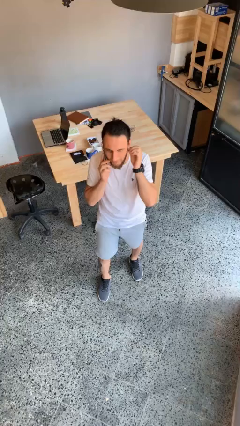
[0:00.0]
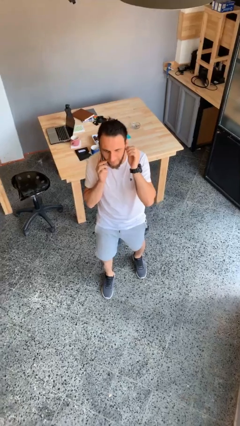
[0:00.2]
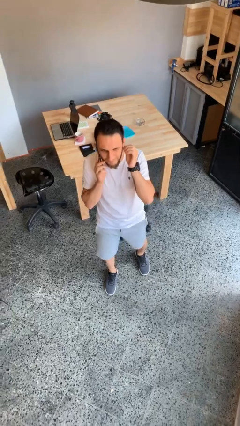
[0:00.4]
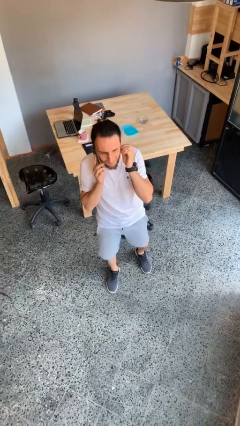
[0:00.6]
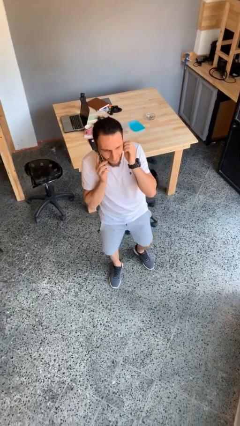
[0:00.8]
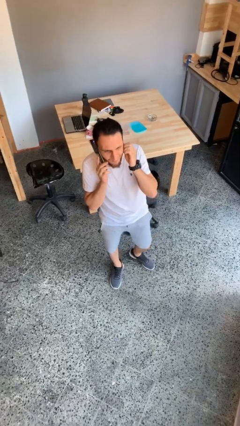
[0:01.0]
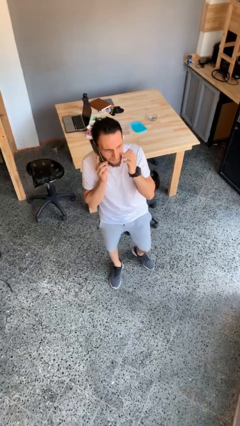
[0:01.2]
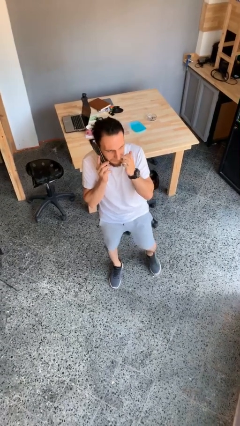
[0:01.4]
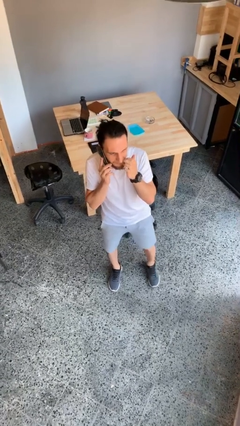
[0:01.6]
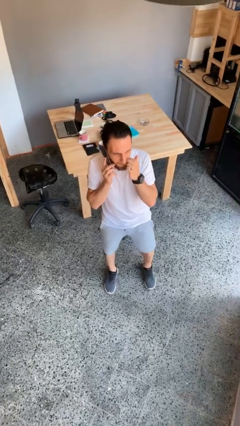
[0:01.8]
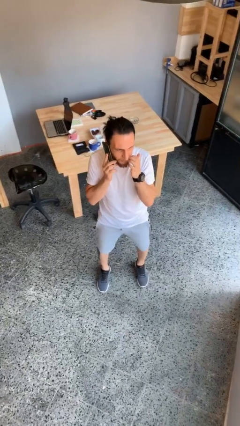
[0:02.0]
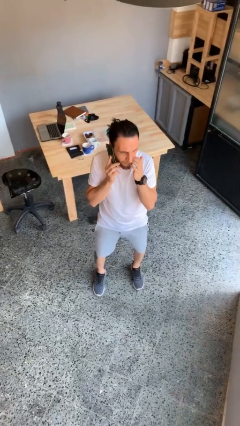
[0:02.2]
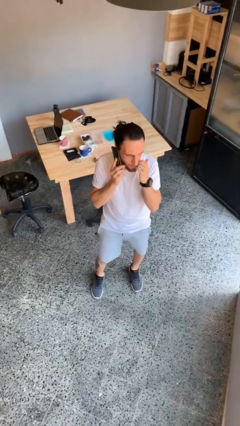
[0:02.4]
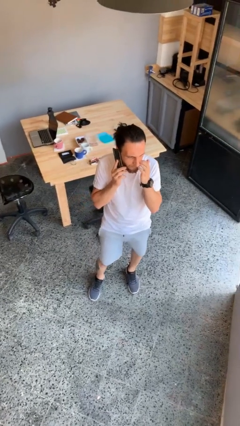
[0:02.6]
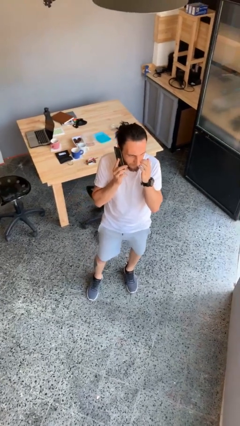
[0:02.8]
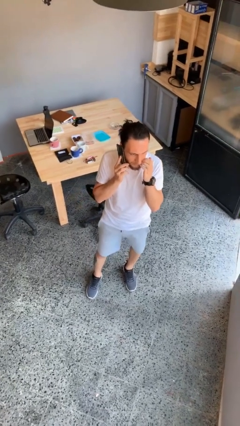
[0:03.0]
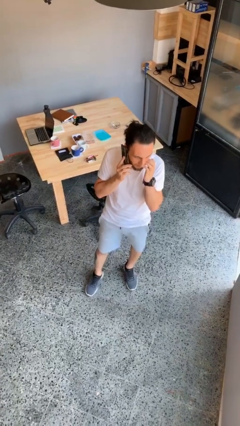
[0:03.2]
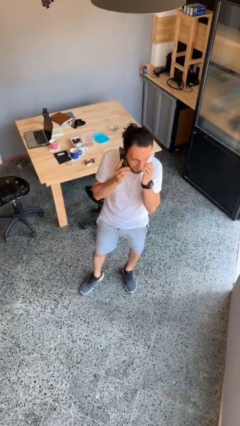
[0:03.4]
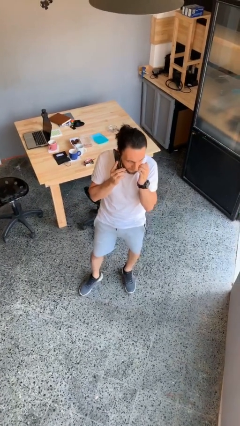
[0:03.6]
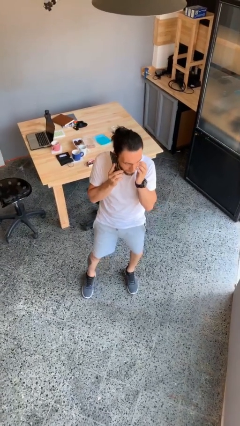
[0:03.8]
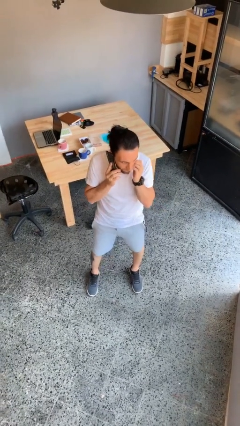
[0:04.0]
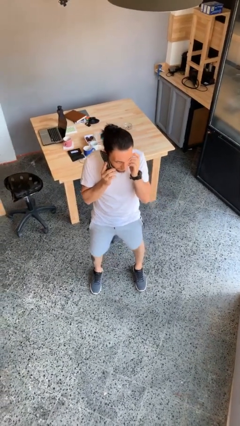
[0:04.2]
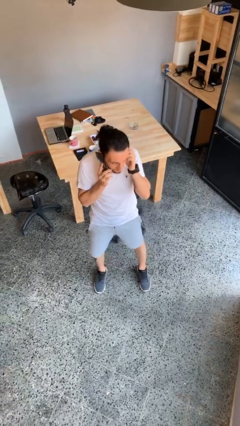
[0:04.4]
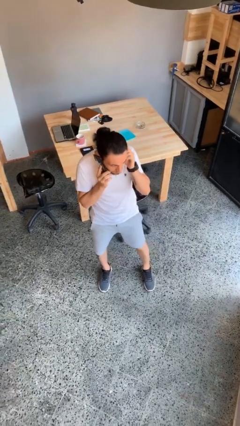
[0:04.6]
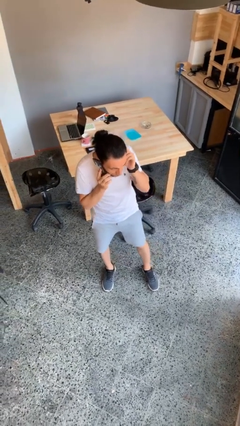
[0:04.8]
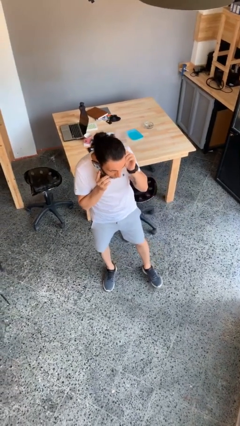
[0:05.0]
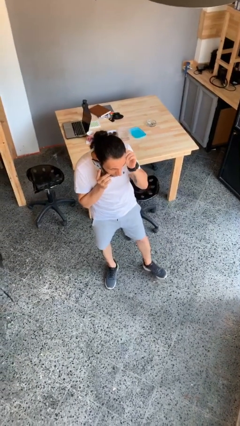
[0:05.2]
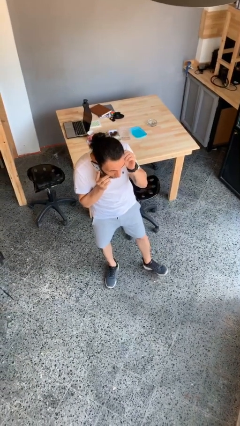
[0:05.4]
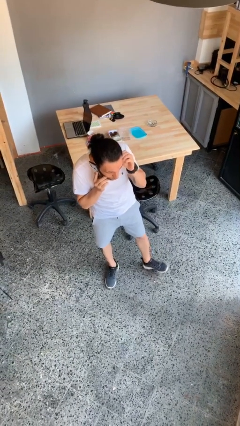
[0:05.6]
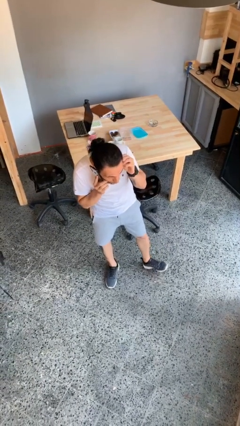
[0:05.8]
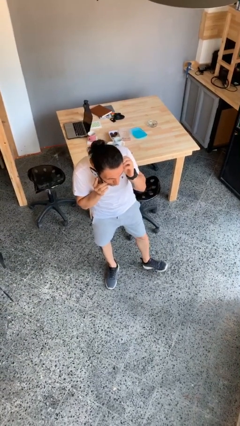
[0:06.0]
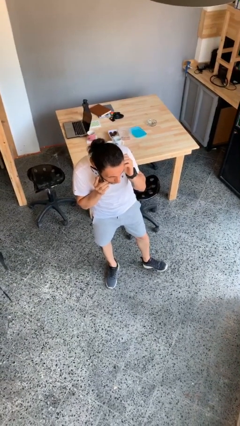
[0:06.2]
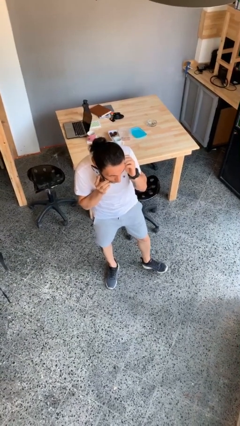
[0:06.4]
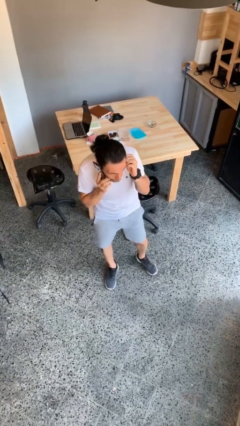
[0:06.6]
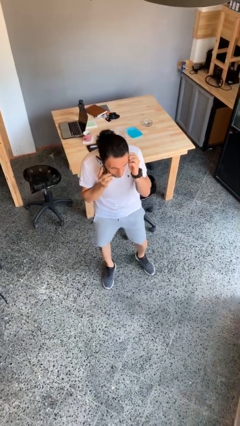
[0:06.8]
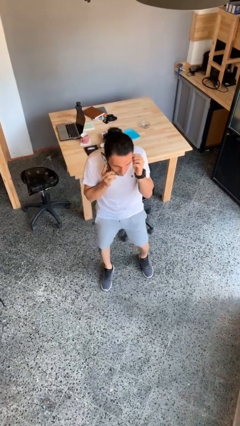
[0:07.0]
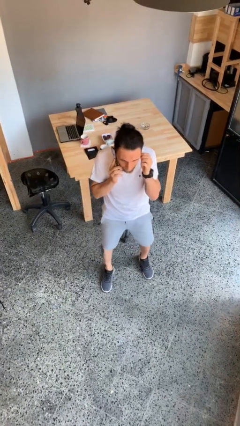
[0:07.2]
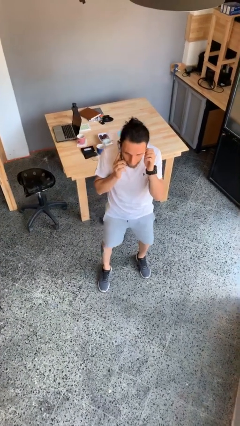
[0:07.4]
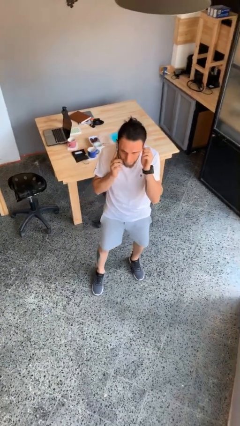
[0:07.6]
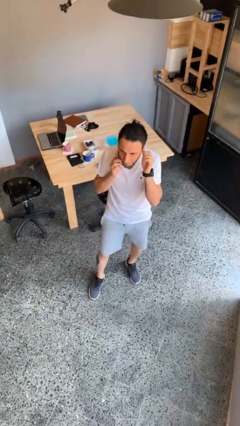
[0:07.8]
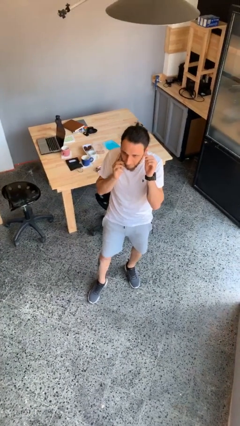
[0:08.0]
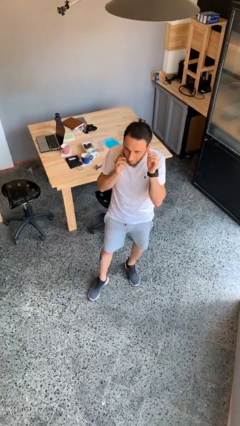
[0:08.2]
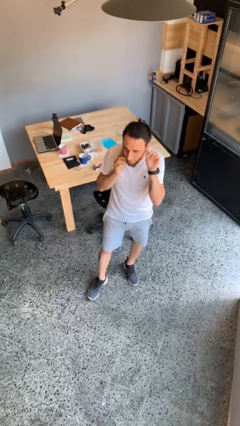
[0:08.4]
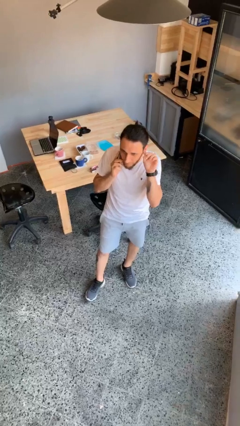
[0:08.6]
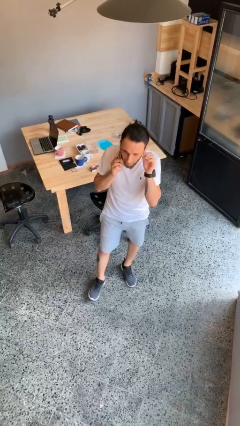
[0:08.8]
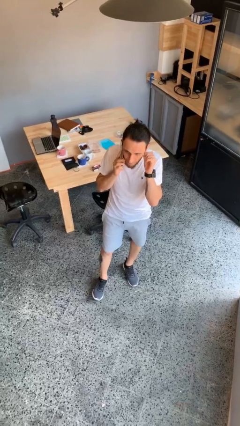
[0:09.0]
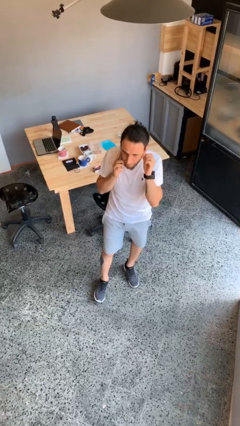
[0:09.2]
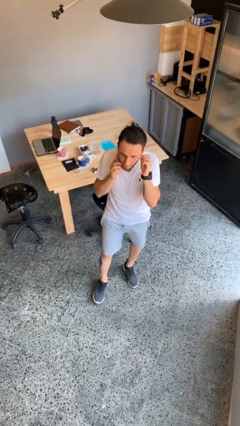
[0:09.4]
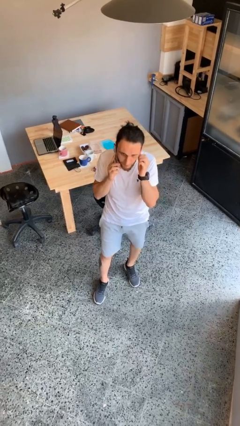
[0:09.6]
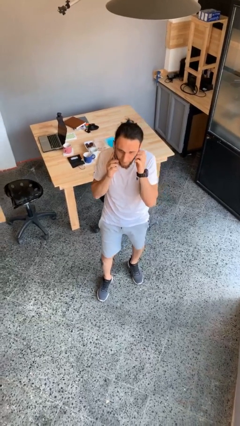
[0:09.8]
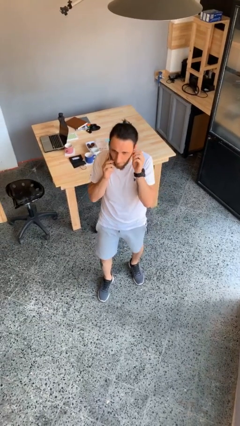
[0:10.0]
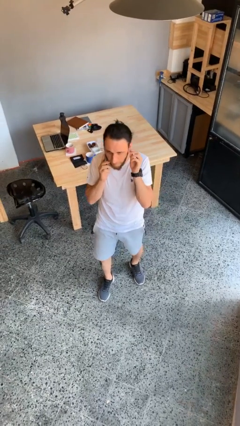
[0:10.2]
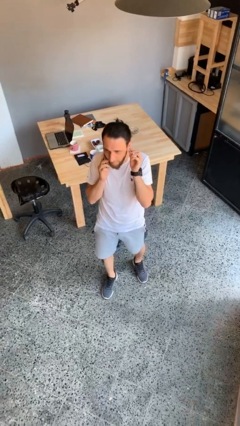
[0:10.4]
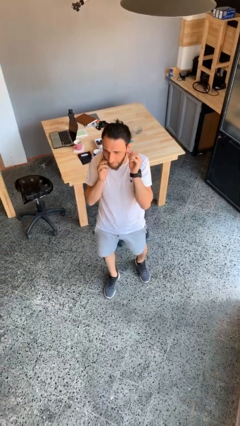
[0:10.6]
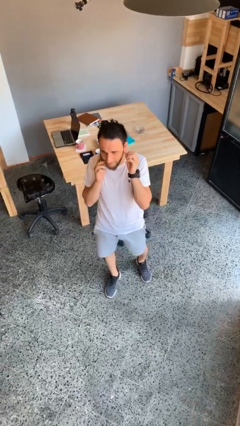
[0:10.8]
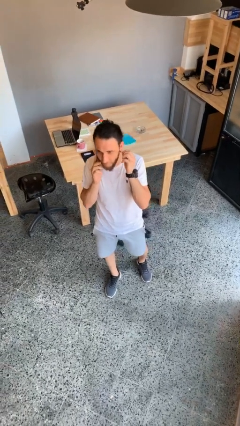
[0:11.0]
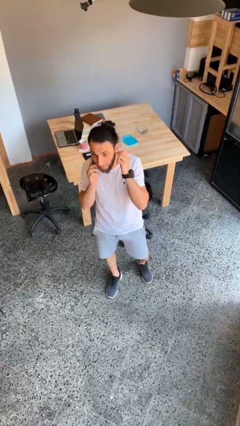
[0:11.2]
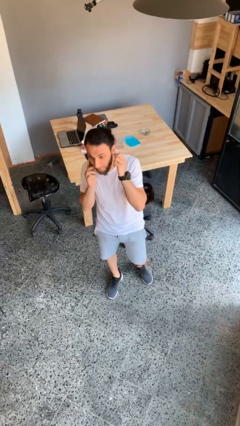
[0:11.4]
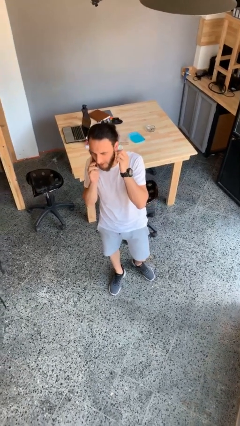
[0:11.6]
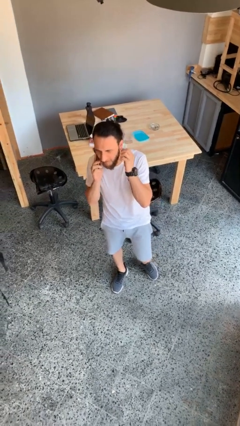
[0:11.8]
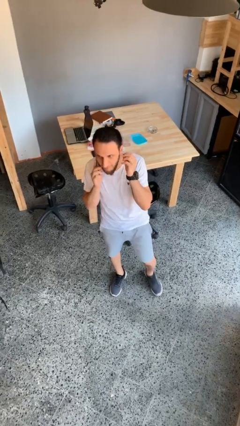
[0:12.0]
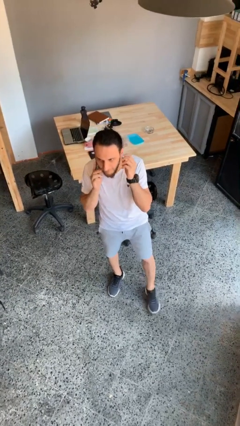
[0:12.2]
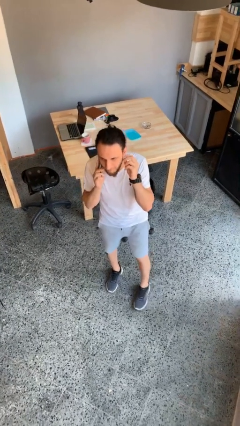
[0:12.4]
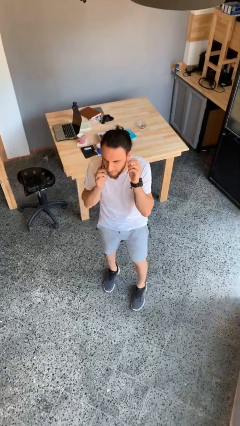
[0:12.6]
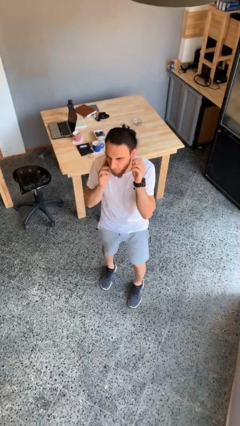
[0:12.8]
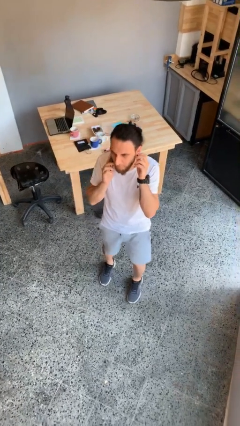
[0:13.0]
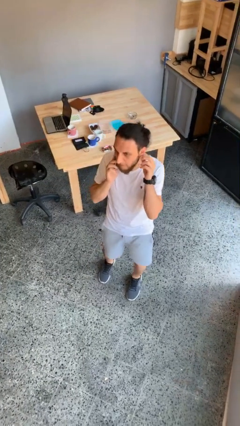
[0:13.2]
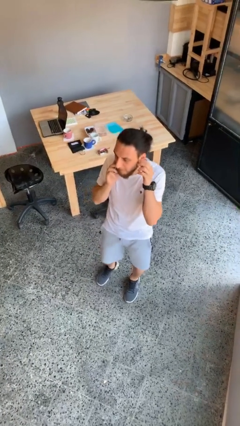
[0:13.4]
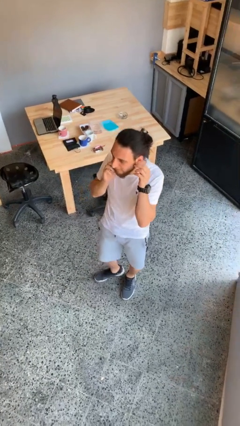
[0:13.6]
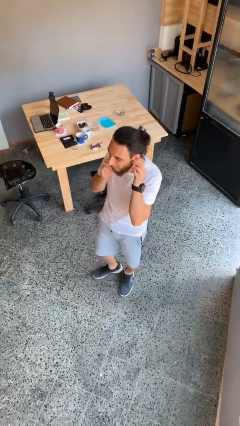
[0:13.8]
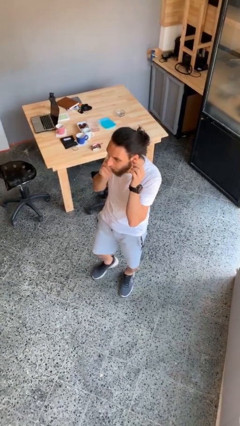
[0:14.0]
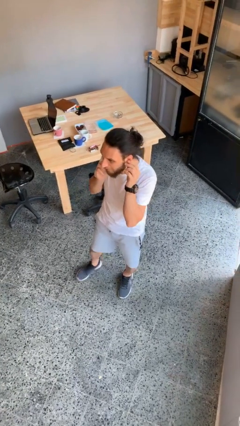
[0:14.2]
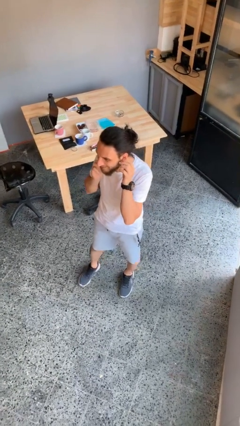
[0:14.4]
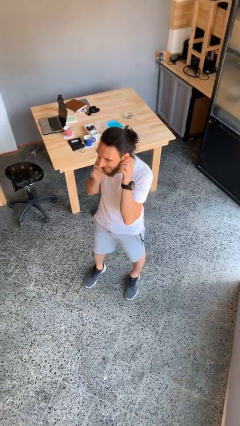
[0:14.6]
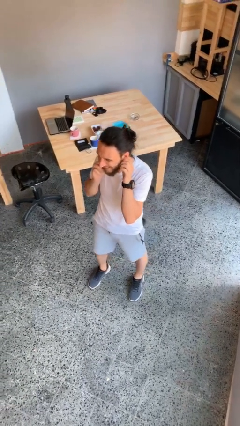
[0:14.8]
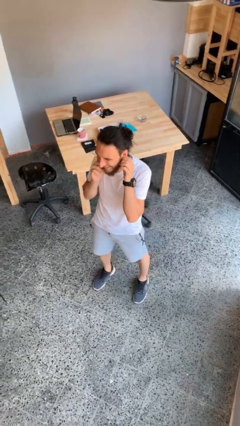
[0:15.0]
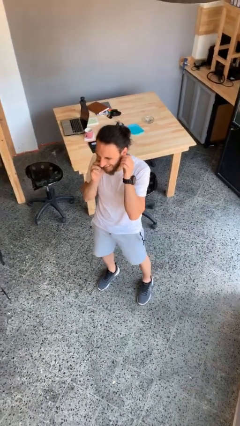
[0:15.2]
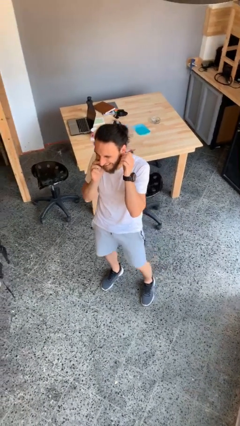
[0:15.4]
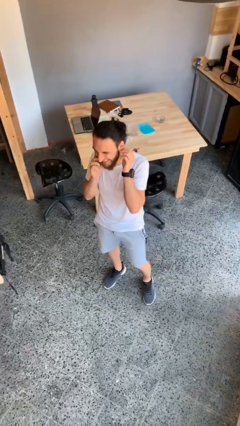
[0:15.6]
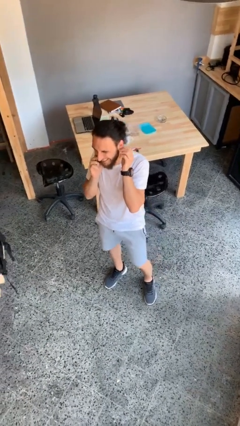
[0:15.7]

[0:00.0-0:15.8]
person talks on phone

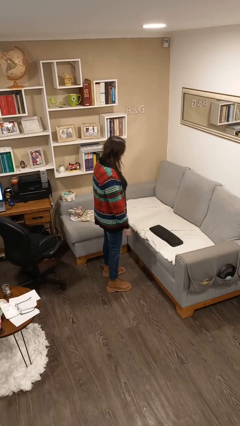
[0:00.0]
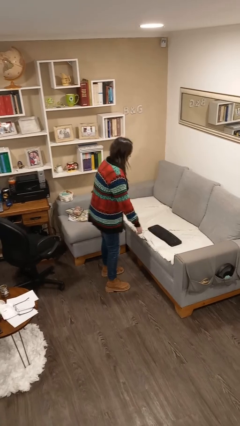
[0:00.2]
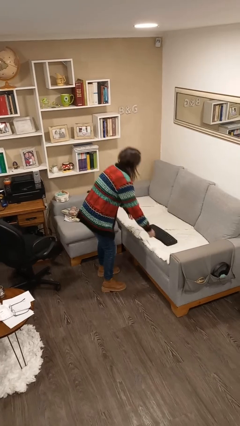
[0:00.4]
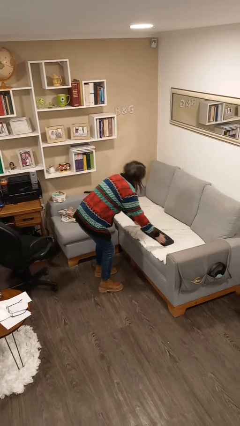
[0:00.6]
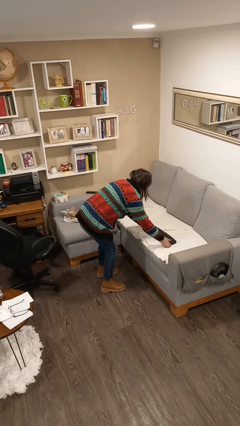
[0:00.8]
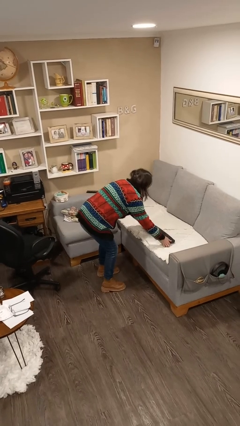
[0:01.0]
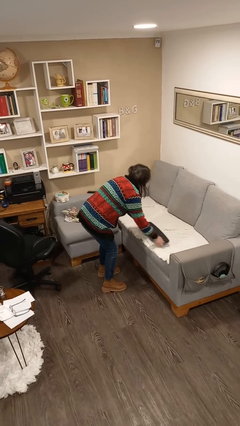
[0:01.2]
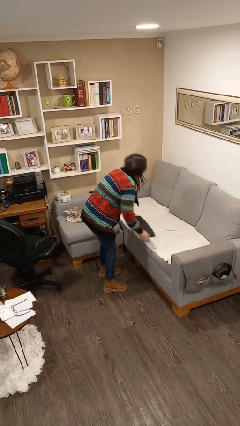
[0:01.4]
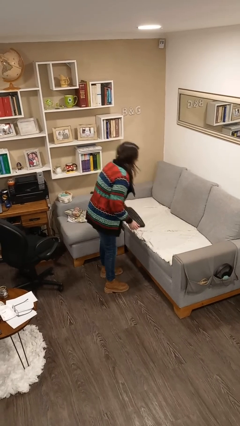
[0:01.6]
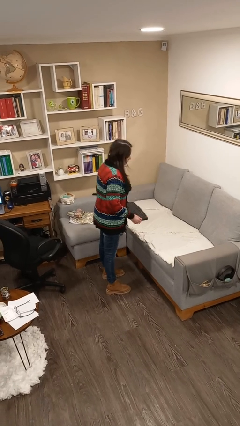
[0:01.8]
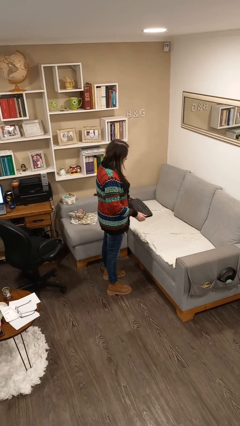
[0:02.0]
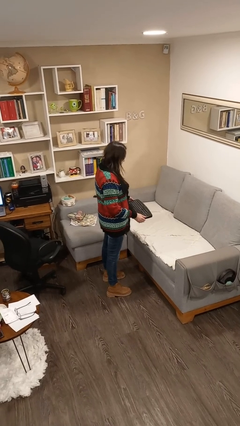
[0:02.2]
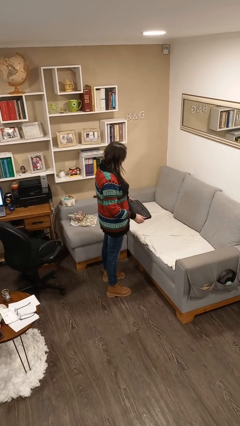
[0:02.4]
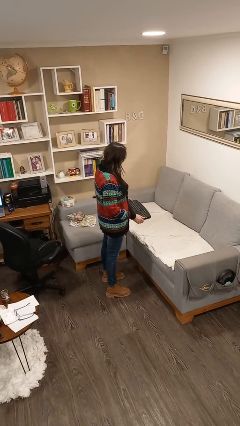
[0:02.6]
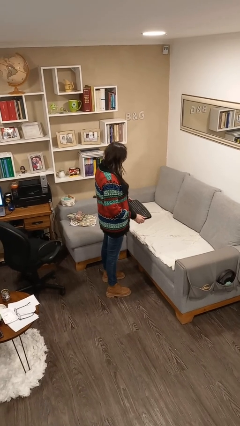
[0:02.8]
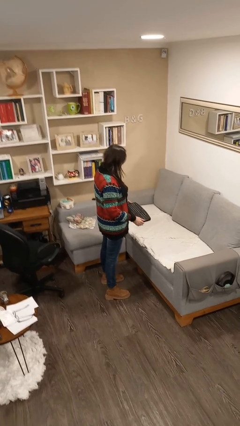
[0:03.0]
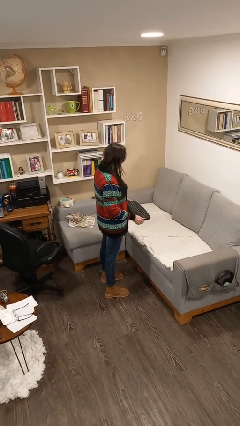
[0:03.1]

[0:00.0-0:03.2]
person picks up object from couch
